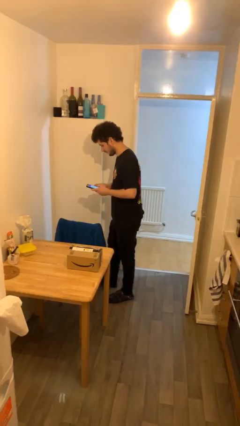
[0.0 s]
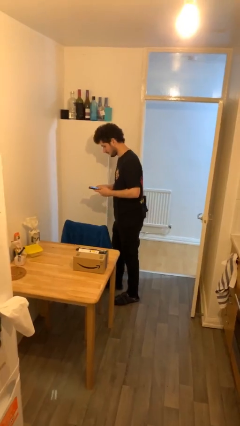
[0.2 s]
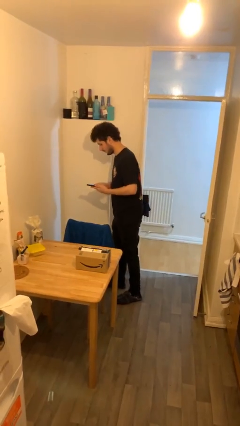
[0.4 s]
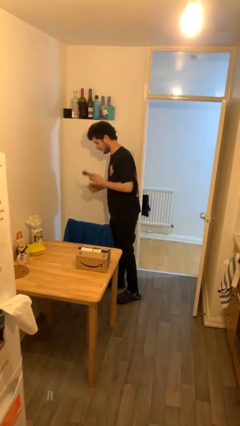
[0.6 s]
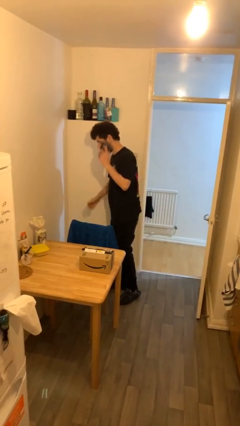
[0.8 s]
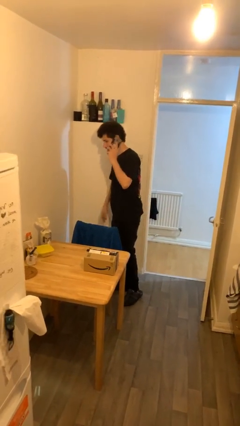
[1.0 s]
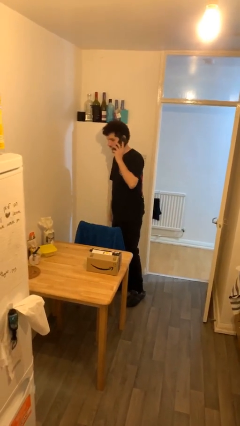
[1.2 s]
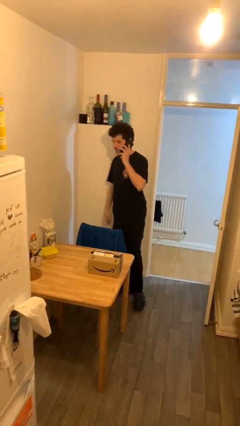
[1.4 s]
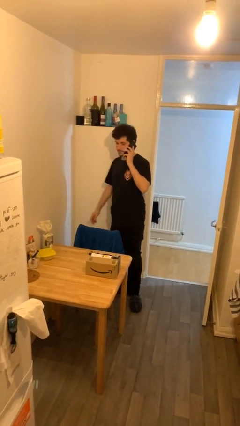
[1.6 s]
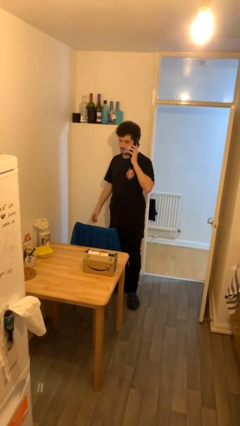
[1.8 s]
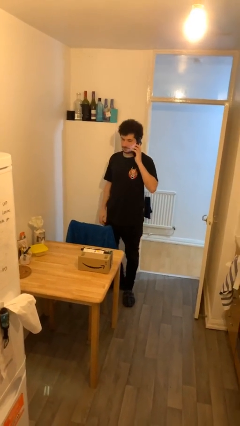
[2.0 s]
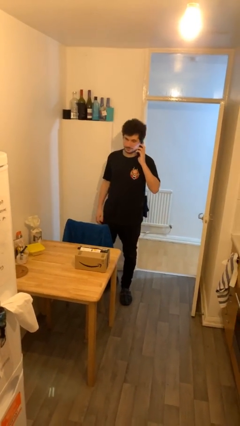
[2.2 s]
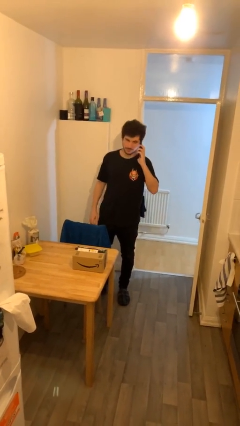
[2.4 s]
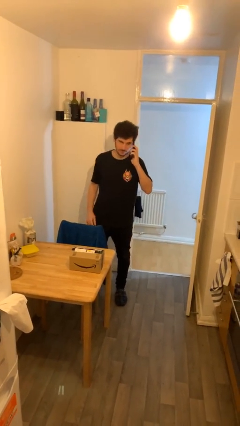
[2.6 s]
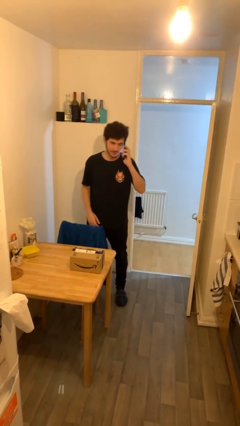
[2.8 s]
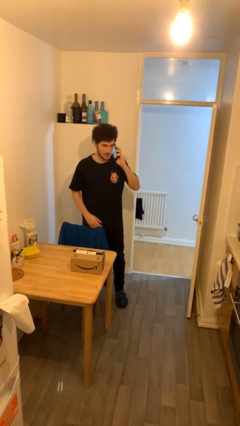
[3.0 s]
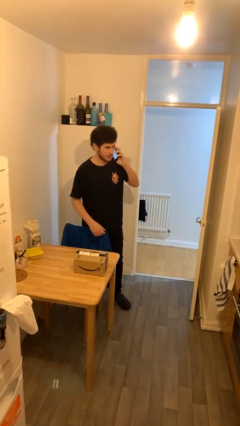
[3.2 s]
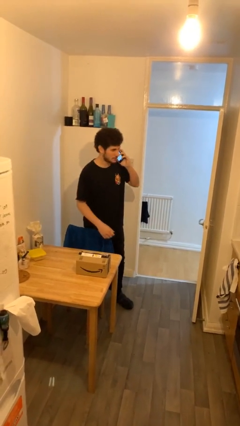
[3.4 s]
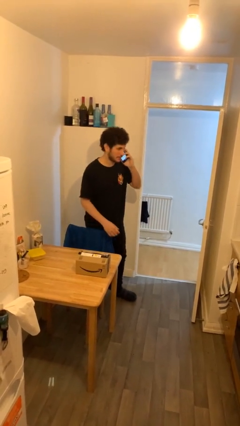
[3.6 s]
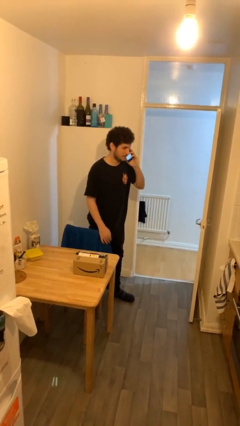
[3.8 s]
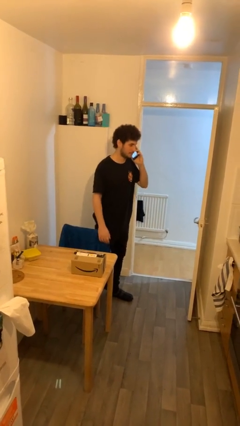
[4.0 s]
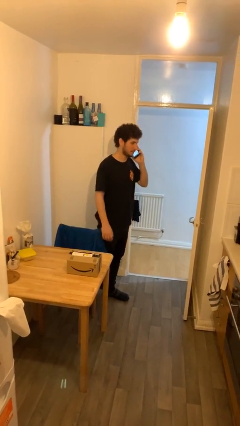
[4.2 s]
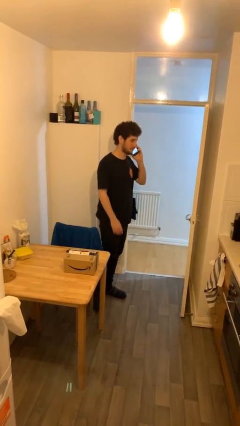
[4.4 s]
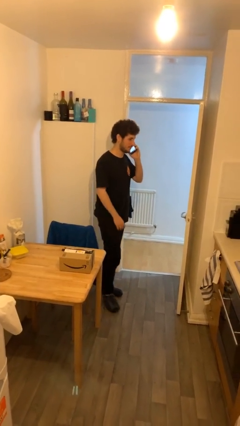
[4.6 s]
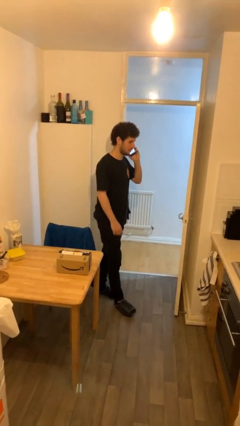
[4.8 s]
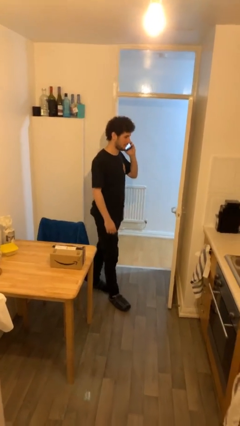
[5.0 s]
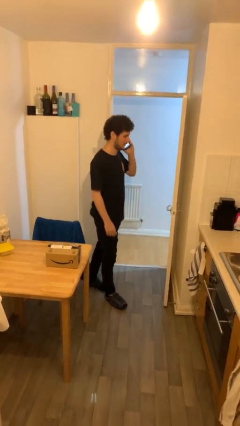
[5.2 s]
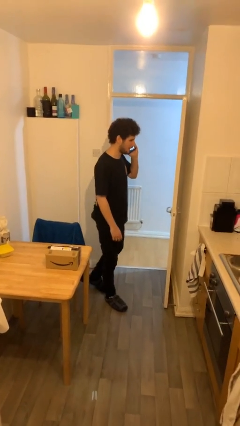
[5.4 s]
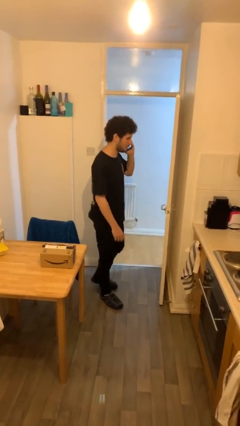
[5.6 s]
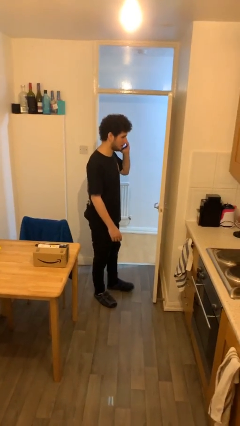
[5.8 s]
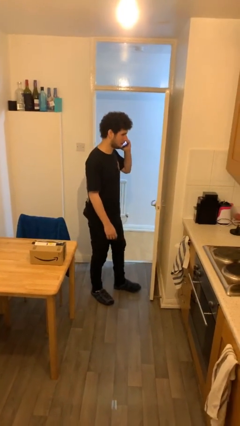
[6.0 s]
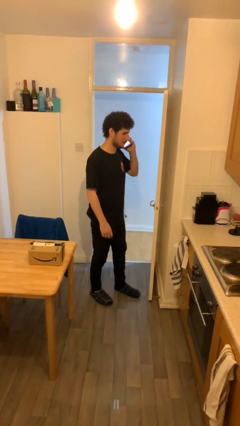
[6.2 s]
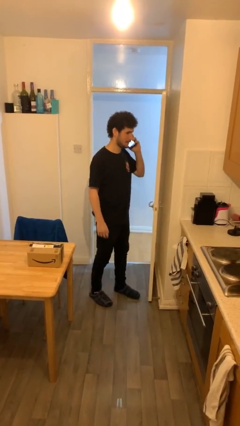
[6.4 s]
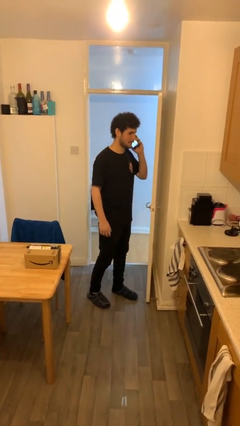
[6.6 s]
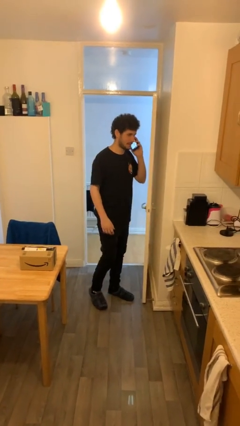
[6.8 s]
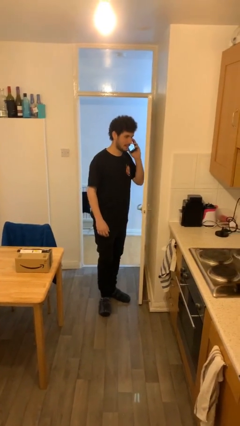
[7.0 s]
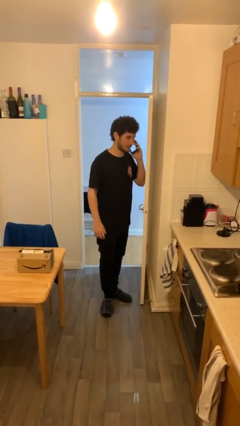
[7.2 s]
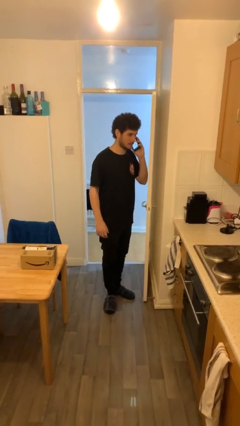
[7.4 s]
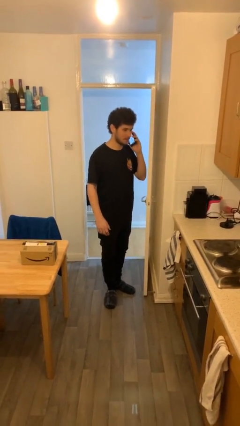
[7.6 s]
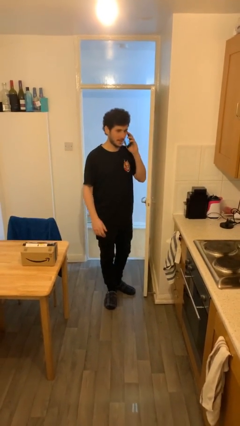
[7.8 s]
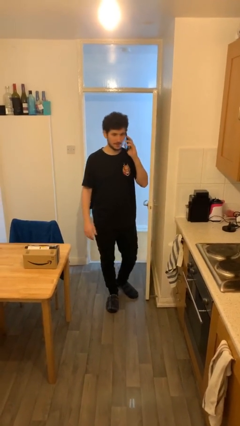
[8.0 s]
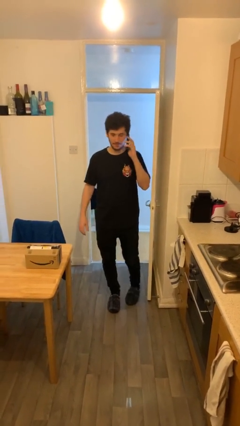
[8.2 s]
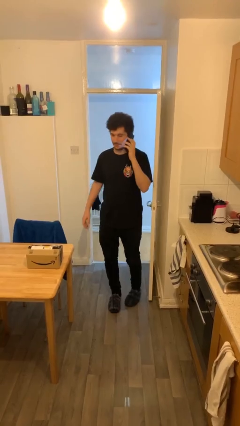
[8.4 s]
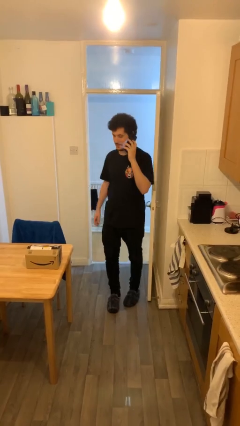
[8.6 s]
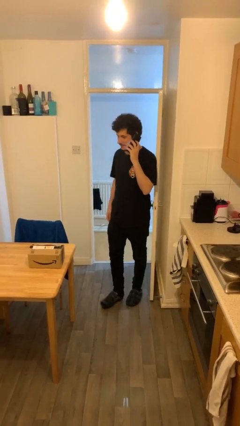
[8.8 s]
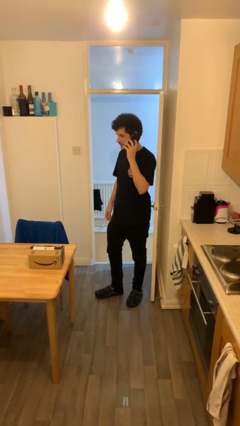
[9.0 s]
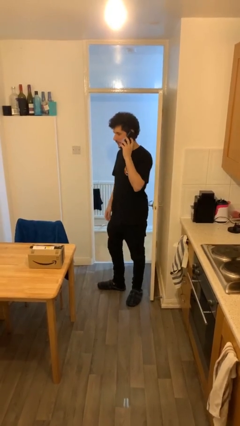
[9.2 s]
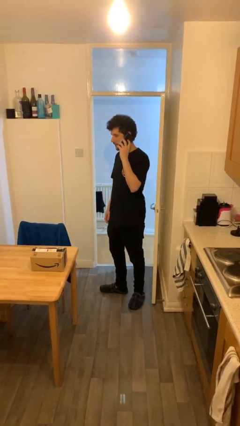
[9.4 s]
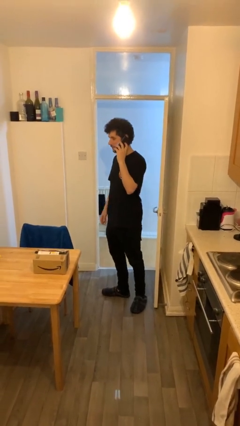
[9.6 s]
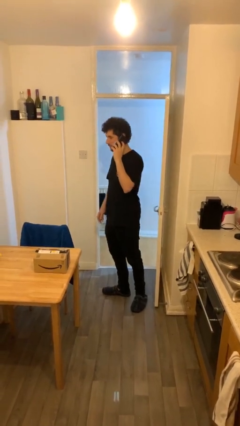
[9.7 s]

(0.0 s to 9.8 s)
person talks on phone

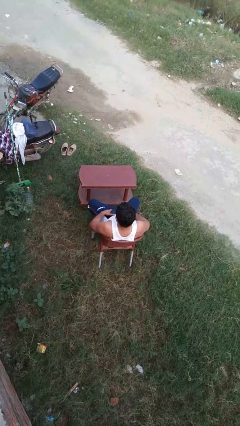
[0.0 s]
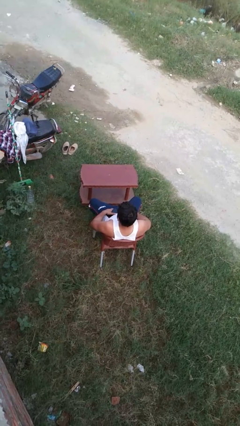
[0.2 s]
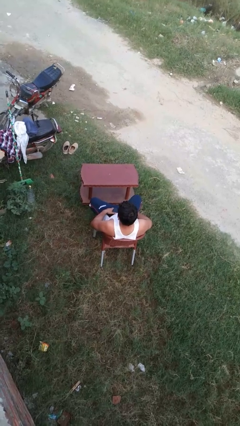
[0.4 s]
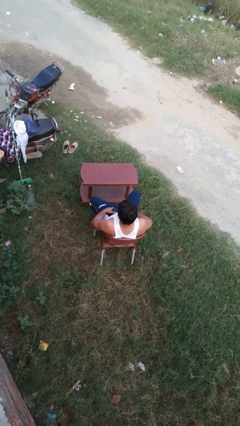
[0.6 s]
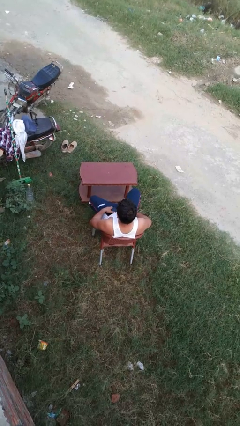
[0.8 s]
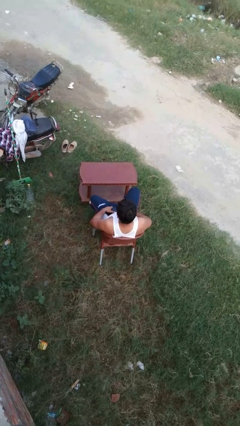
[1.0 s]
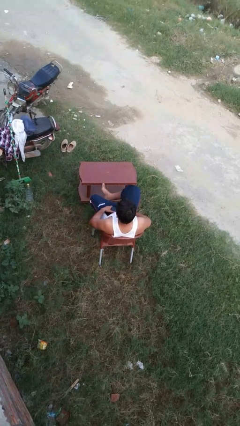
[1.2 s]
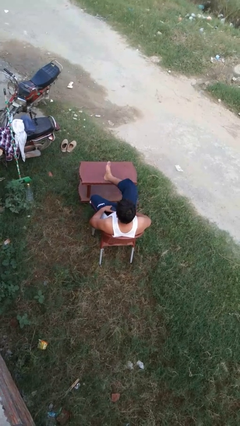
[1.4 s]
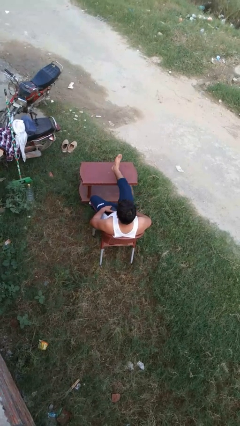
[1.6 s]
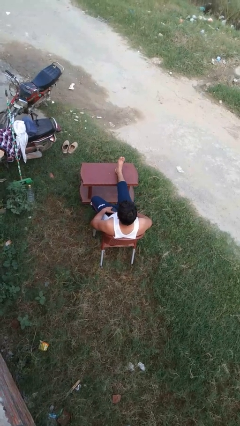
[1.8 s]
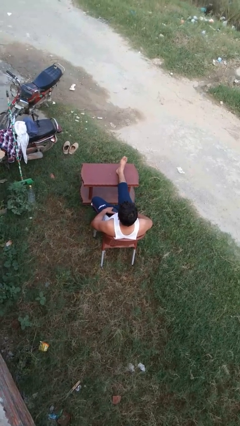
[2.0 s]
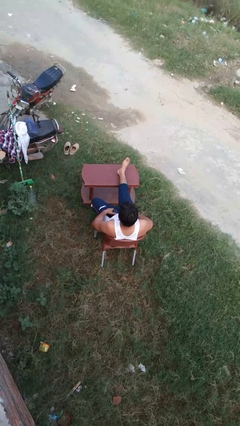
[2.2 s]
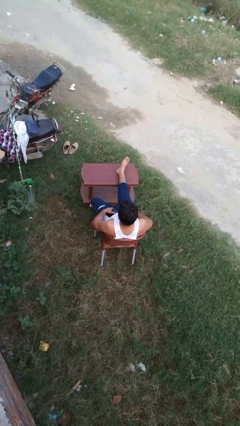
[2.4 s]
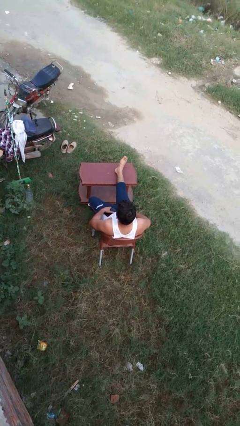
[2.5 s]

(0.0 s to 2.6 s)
person puts feet up

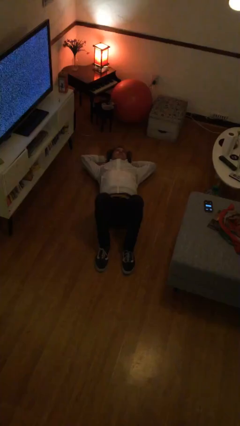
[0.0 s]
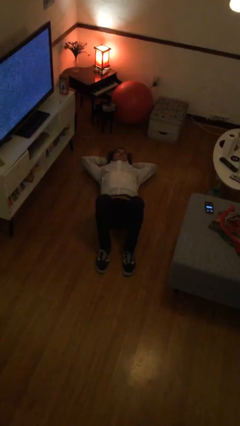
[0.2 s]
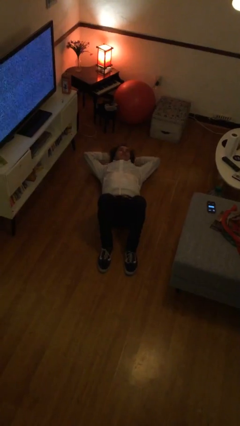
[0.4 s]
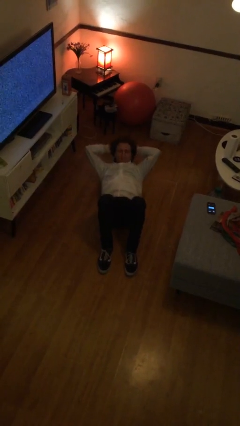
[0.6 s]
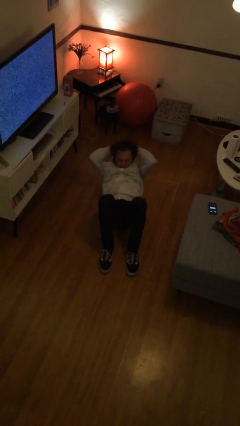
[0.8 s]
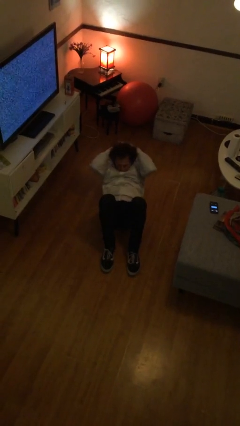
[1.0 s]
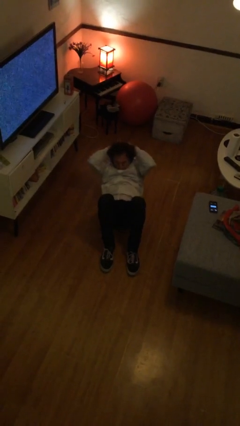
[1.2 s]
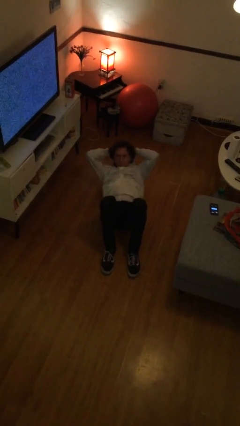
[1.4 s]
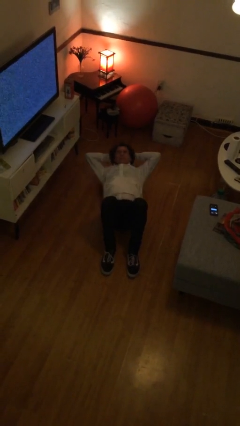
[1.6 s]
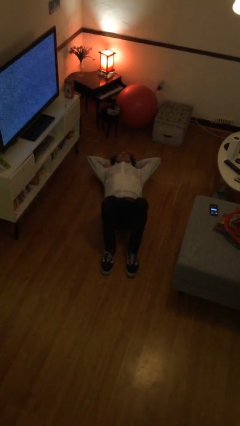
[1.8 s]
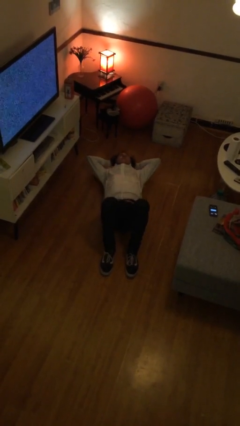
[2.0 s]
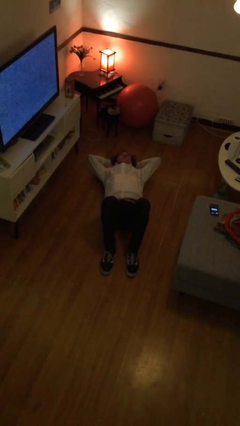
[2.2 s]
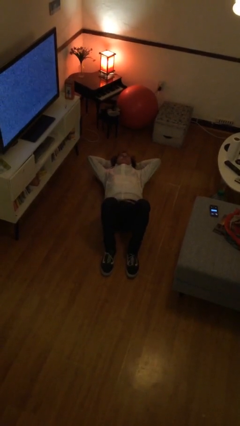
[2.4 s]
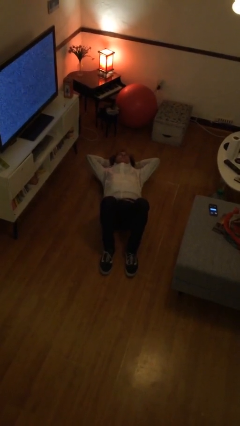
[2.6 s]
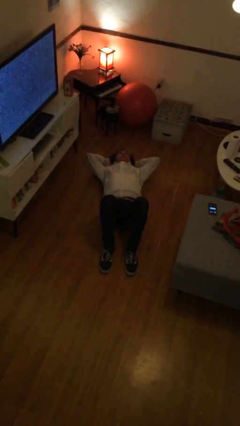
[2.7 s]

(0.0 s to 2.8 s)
person exercises with situp

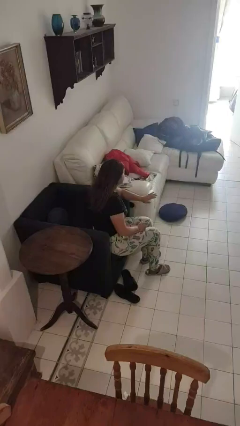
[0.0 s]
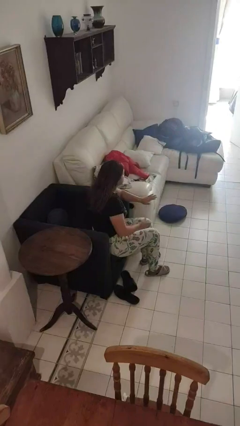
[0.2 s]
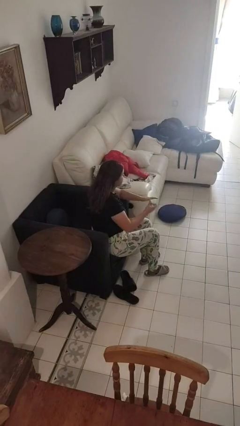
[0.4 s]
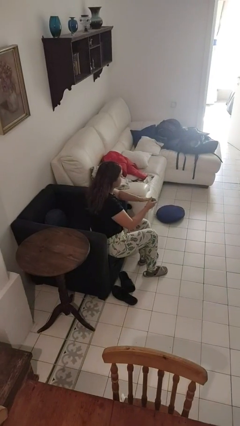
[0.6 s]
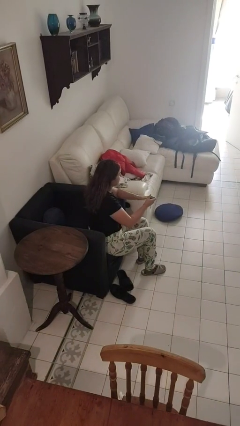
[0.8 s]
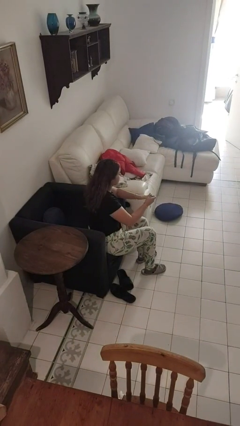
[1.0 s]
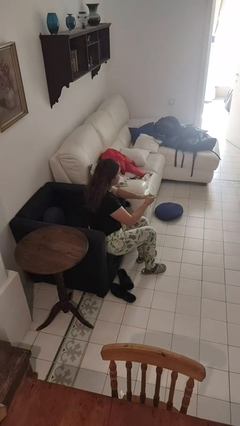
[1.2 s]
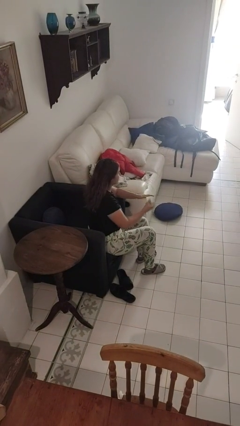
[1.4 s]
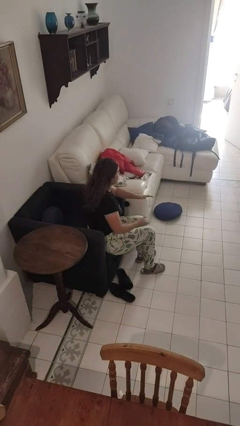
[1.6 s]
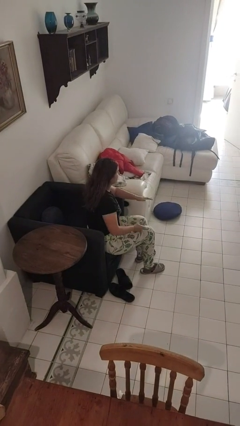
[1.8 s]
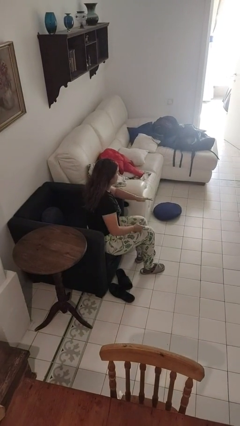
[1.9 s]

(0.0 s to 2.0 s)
person clips fingernails

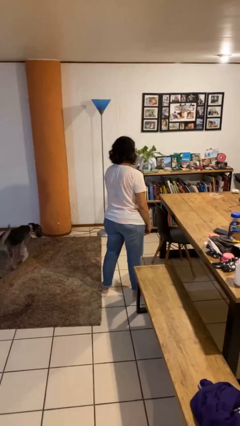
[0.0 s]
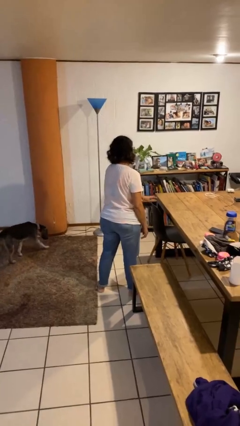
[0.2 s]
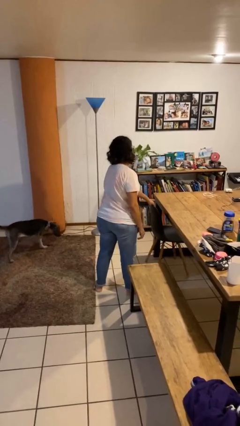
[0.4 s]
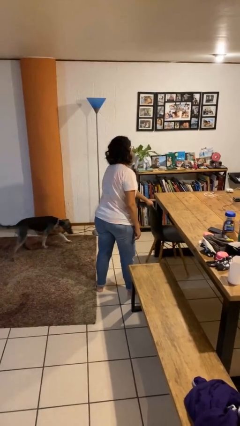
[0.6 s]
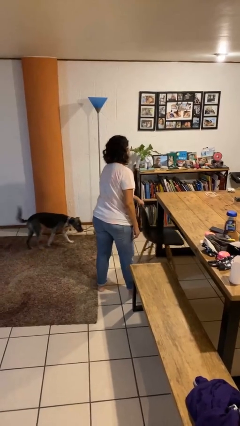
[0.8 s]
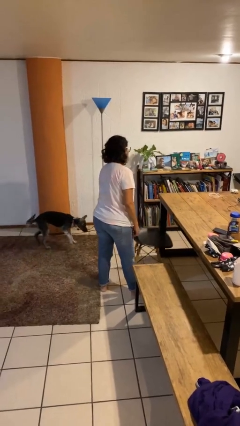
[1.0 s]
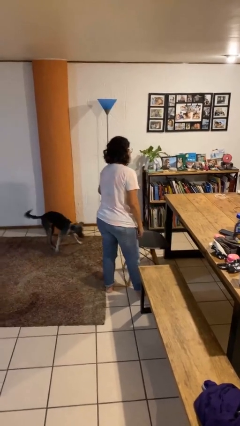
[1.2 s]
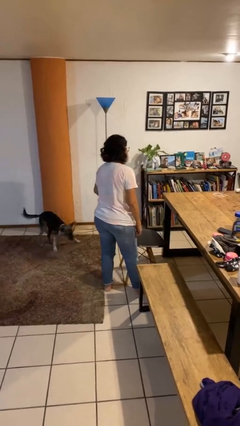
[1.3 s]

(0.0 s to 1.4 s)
person pulls out chair
